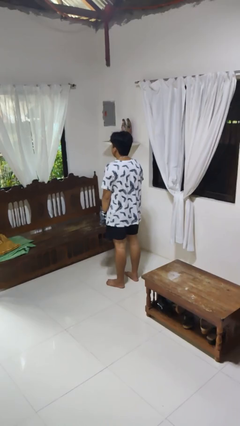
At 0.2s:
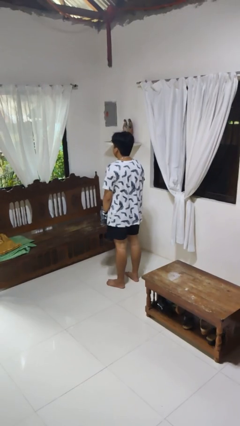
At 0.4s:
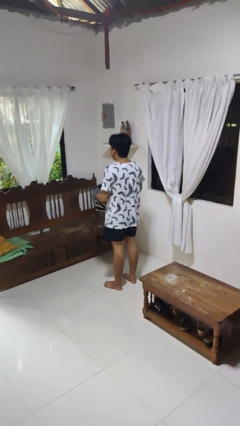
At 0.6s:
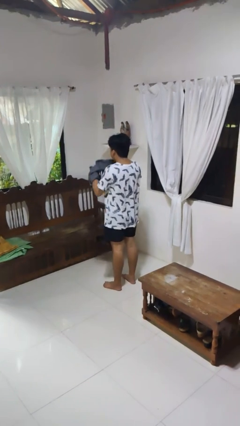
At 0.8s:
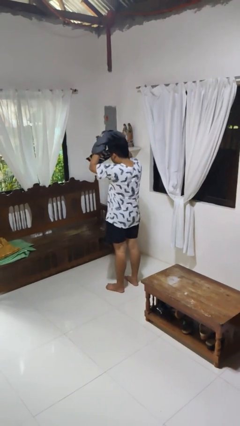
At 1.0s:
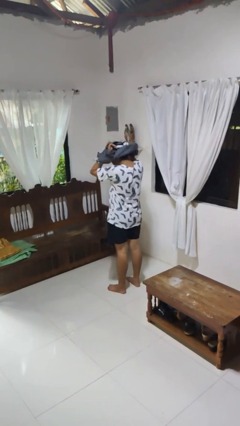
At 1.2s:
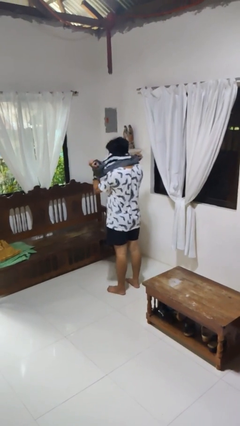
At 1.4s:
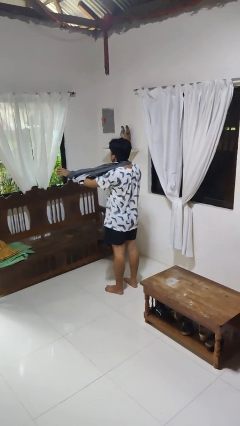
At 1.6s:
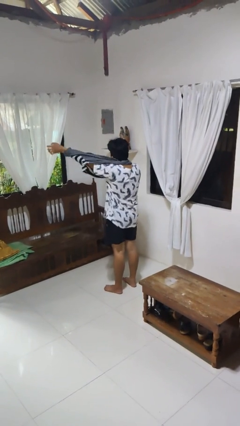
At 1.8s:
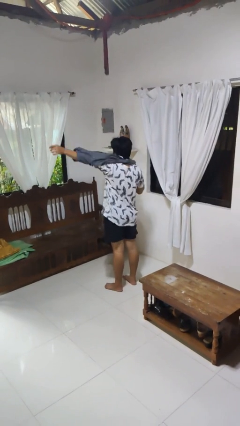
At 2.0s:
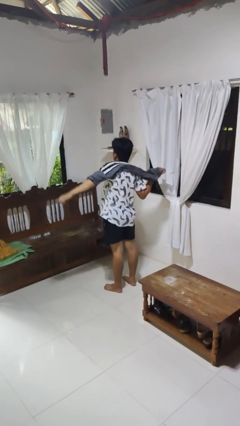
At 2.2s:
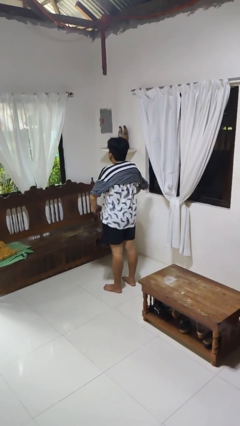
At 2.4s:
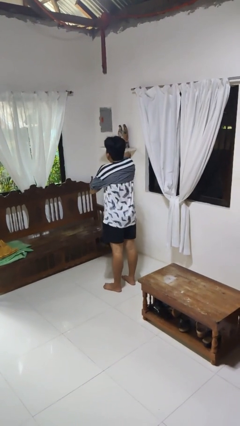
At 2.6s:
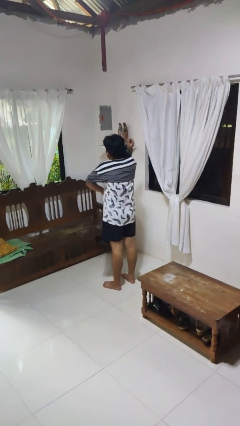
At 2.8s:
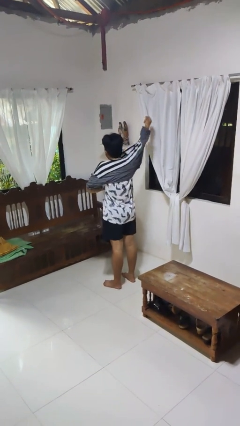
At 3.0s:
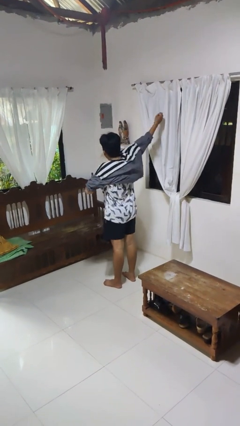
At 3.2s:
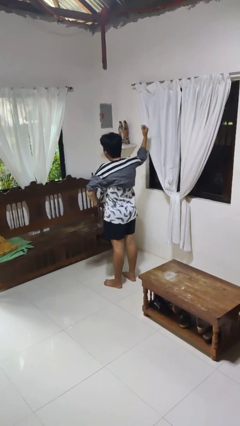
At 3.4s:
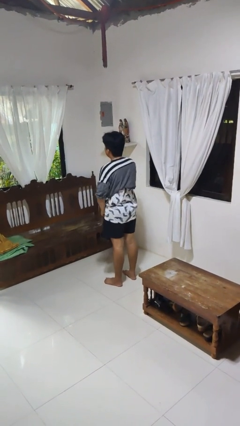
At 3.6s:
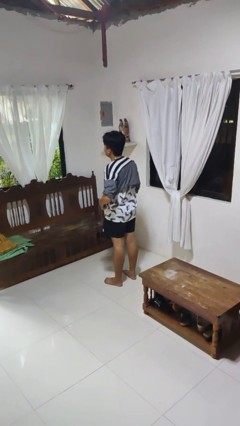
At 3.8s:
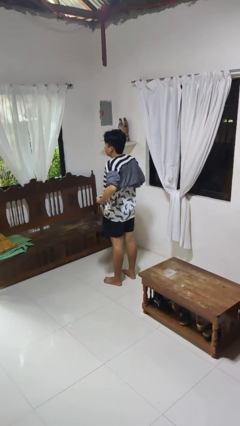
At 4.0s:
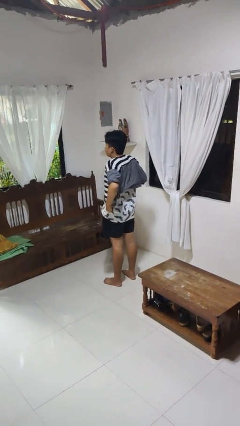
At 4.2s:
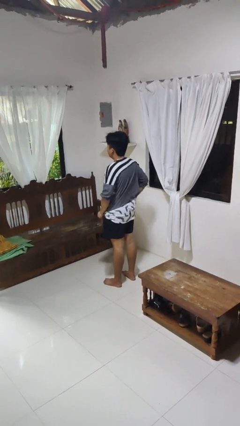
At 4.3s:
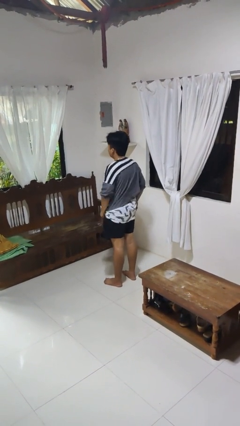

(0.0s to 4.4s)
person puts on shirt

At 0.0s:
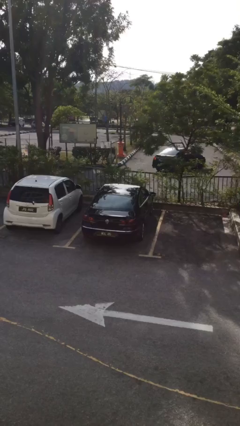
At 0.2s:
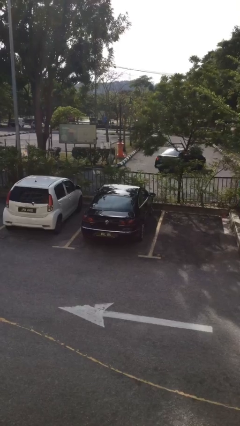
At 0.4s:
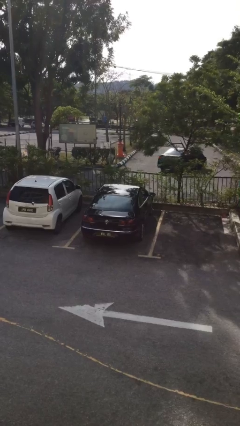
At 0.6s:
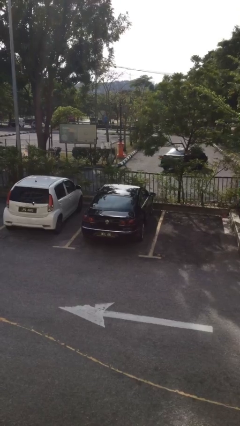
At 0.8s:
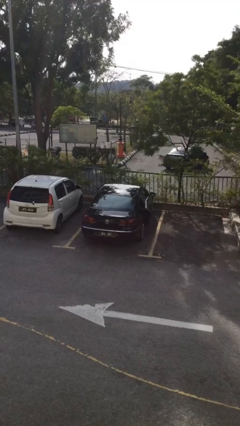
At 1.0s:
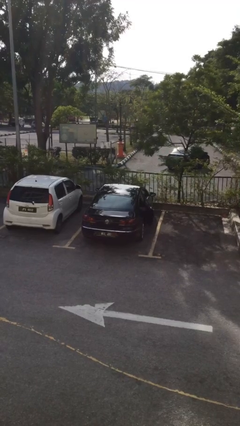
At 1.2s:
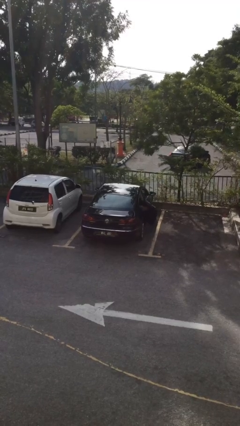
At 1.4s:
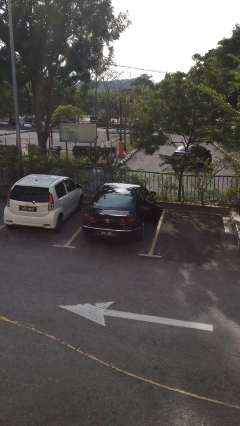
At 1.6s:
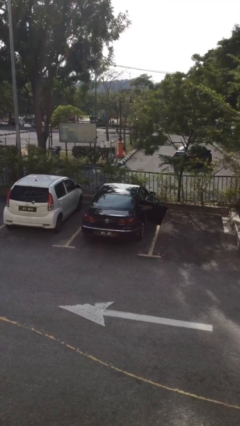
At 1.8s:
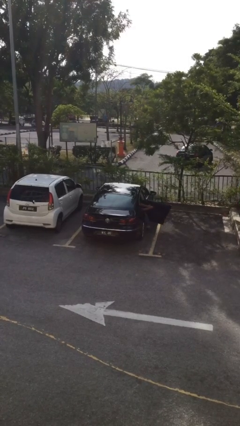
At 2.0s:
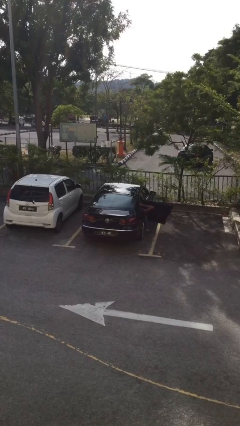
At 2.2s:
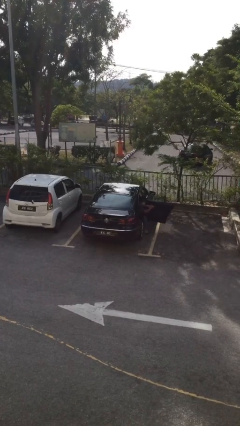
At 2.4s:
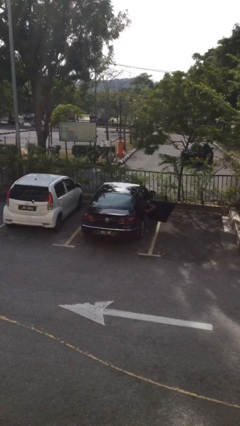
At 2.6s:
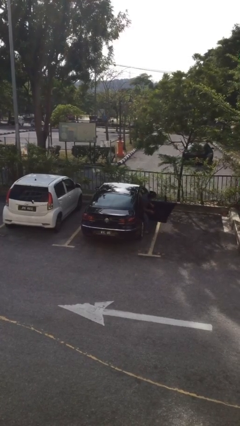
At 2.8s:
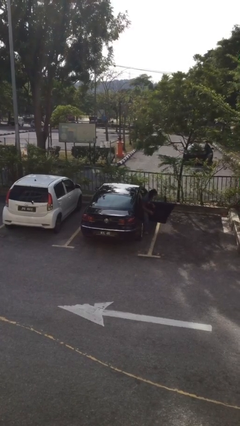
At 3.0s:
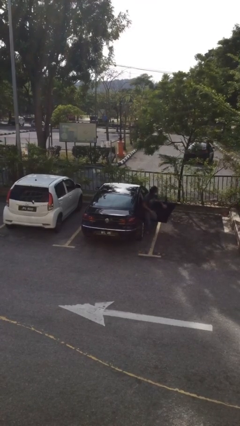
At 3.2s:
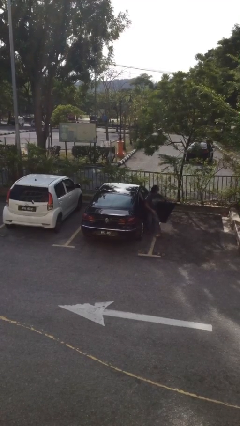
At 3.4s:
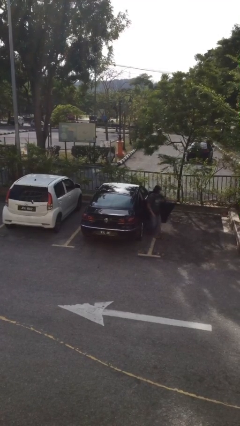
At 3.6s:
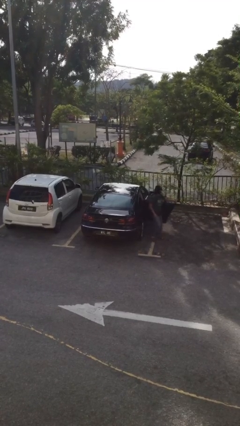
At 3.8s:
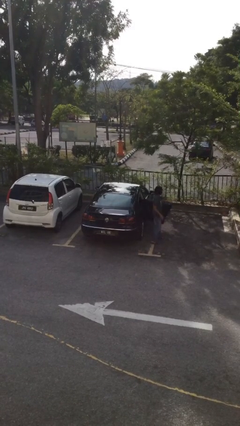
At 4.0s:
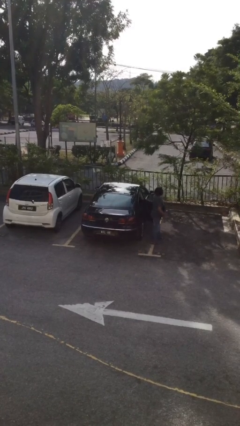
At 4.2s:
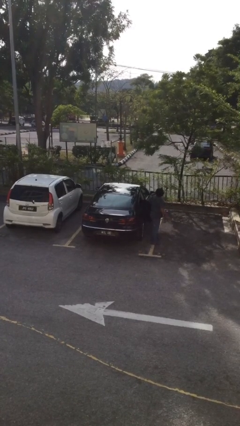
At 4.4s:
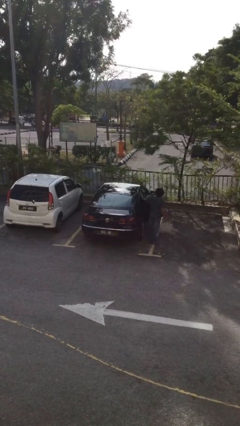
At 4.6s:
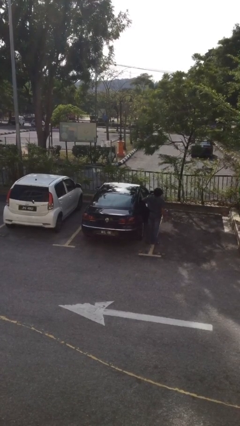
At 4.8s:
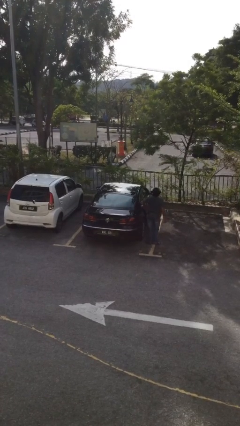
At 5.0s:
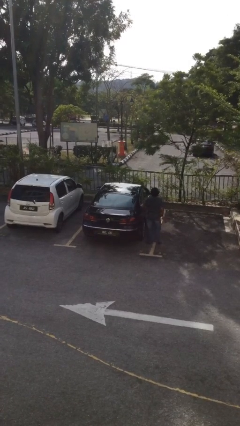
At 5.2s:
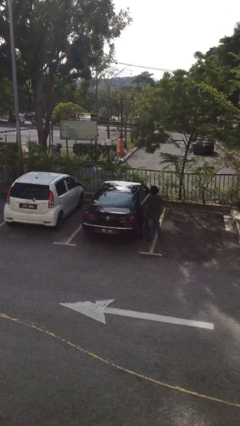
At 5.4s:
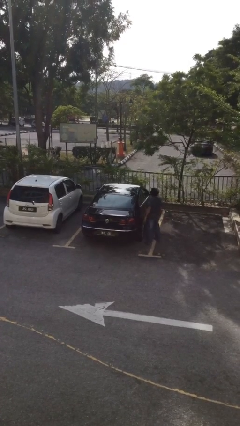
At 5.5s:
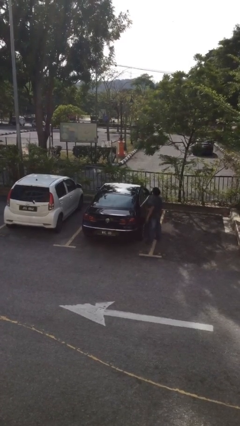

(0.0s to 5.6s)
car drops off person

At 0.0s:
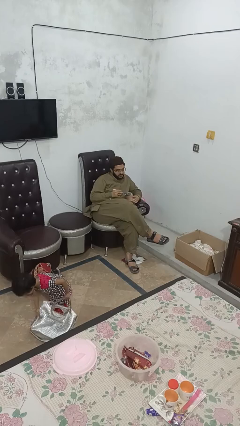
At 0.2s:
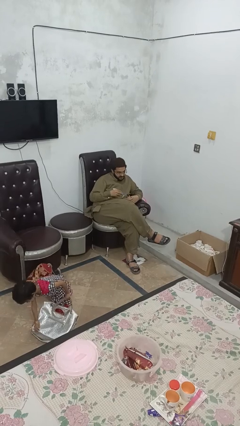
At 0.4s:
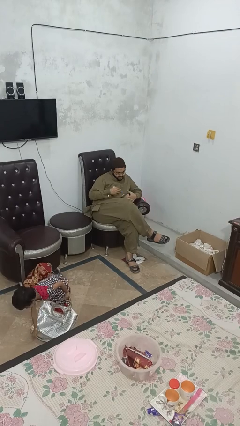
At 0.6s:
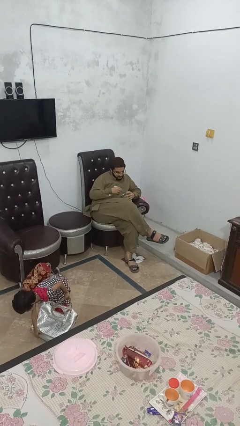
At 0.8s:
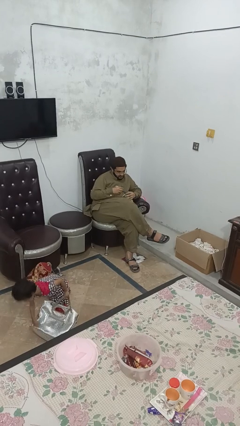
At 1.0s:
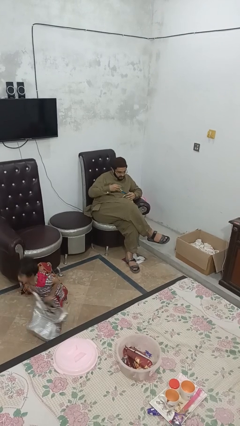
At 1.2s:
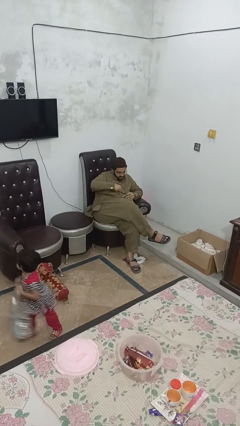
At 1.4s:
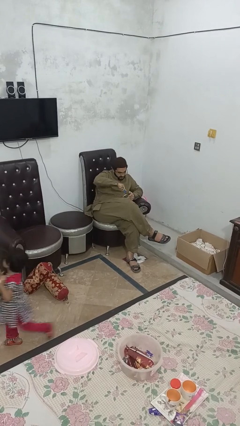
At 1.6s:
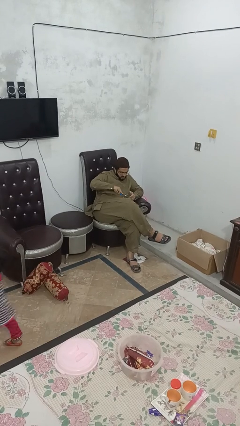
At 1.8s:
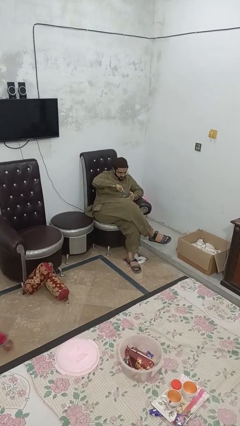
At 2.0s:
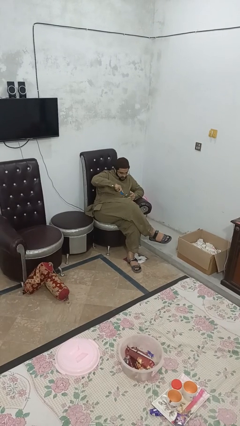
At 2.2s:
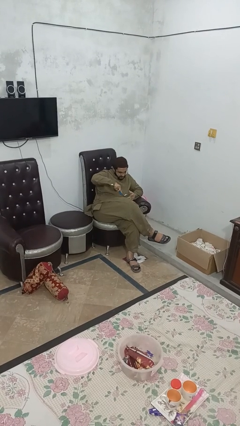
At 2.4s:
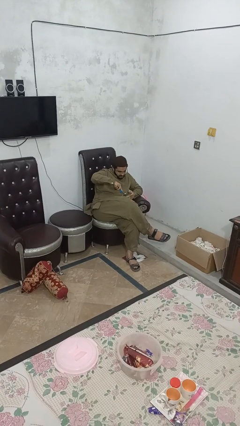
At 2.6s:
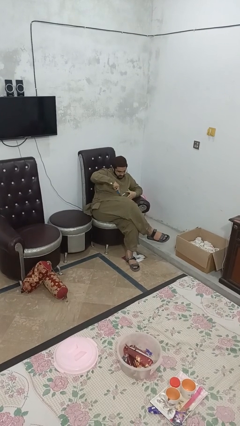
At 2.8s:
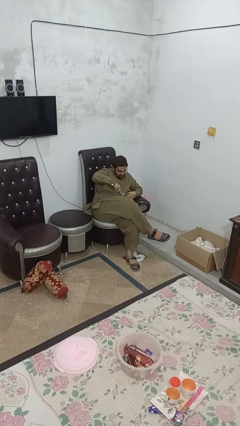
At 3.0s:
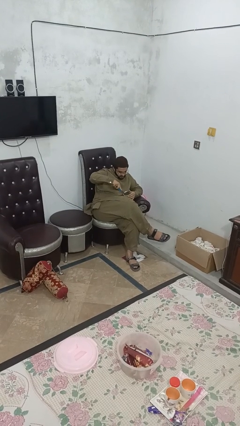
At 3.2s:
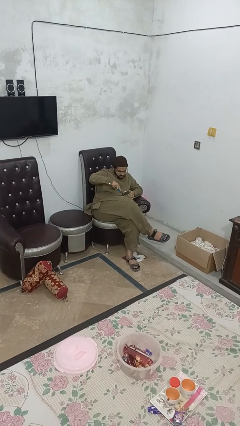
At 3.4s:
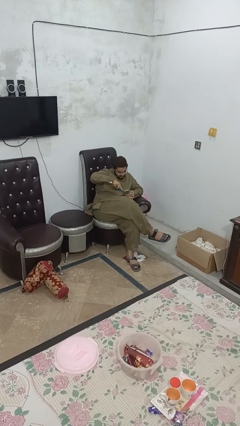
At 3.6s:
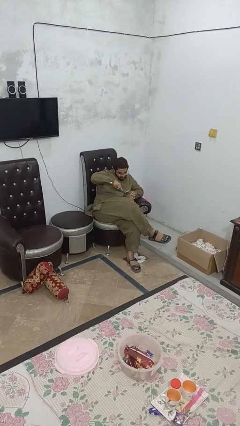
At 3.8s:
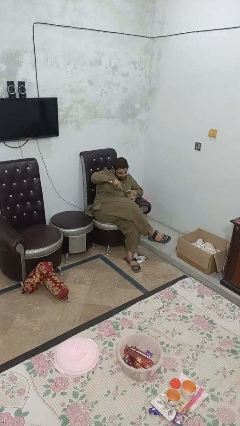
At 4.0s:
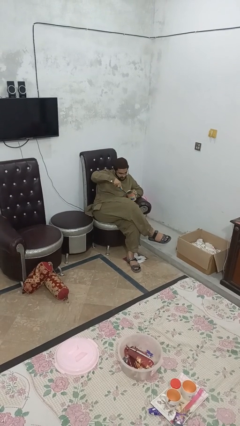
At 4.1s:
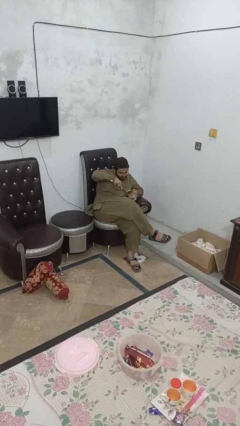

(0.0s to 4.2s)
person opens can with can opener

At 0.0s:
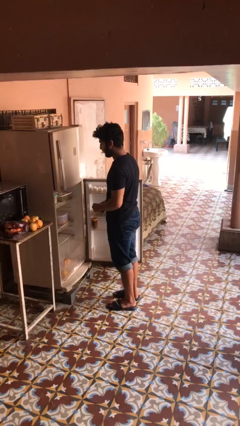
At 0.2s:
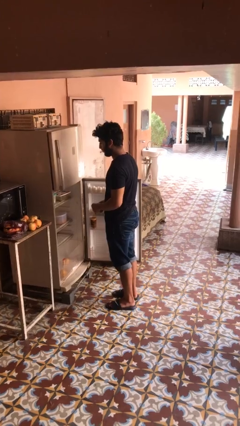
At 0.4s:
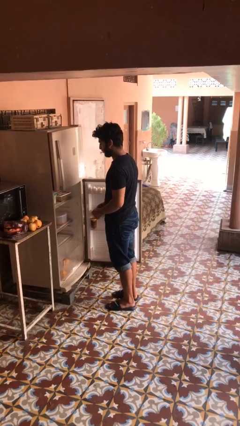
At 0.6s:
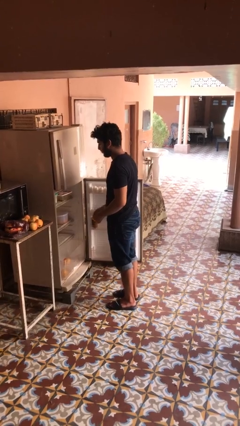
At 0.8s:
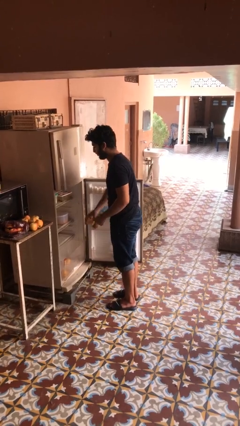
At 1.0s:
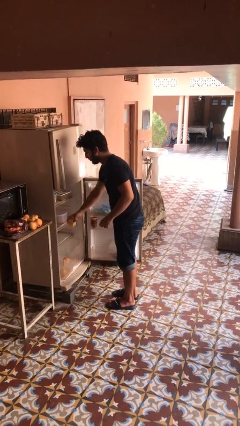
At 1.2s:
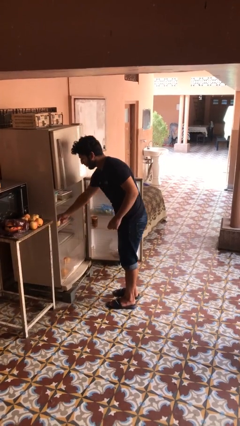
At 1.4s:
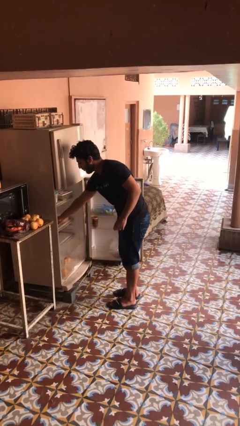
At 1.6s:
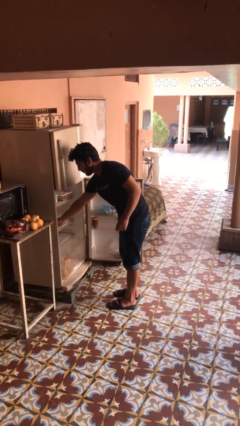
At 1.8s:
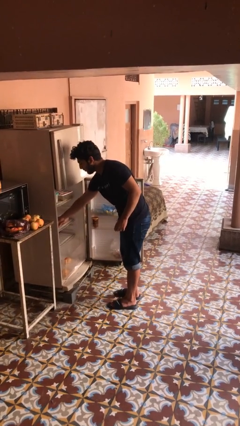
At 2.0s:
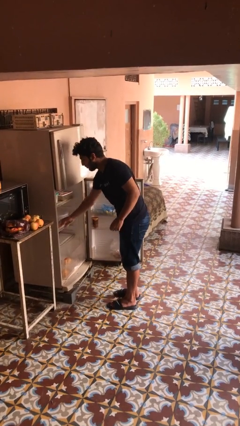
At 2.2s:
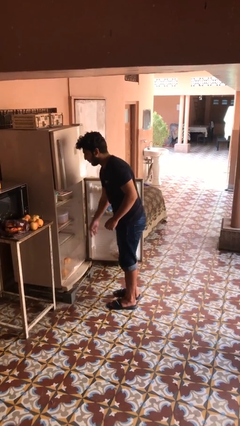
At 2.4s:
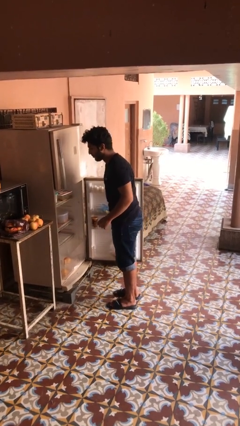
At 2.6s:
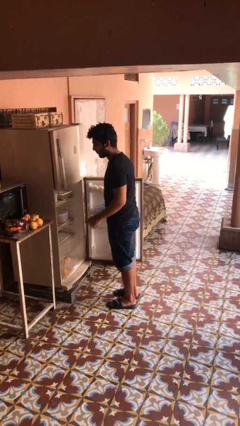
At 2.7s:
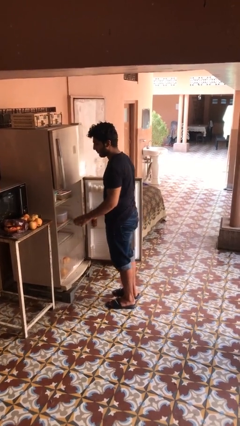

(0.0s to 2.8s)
person loads groceries into refrigerator

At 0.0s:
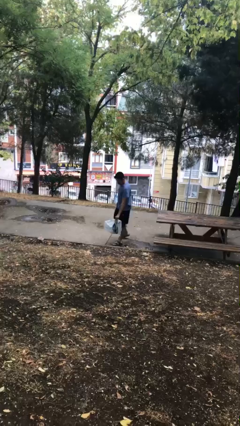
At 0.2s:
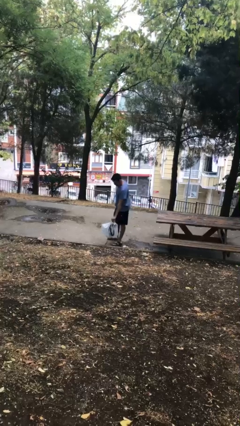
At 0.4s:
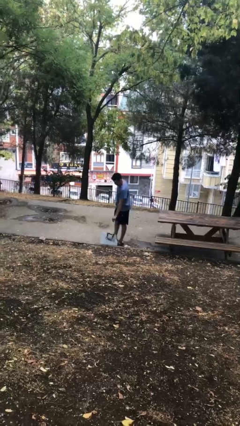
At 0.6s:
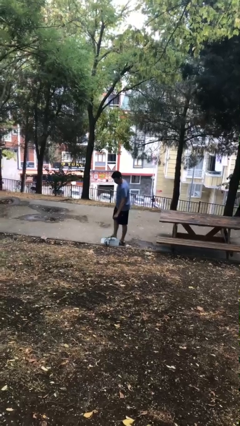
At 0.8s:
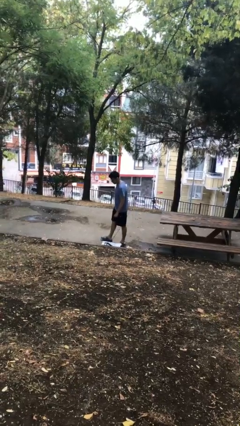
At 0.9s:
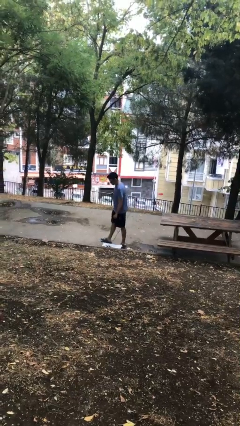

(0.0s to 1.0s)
person puts down object on floor

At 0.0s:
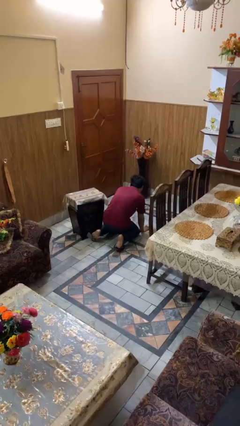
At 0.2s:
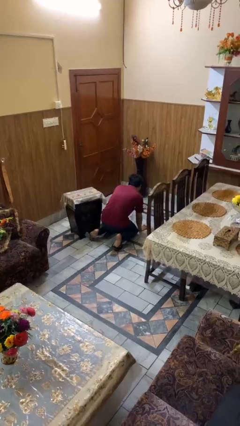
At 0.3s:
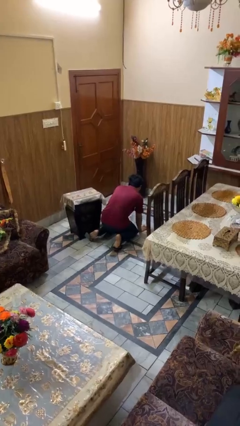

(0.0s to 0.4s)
person stands up from floor
